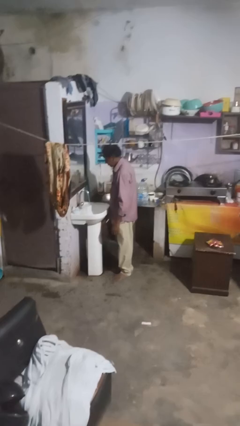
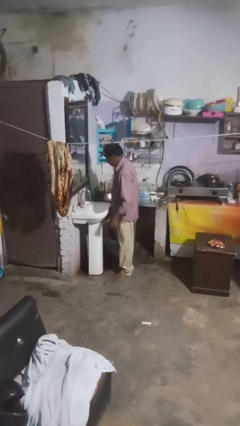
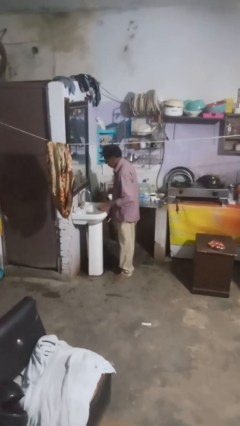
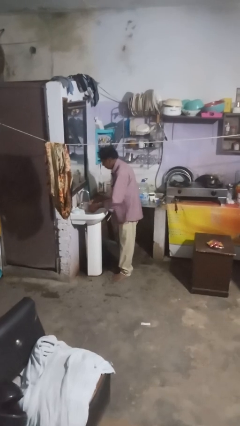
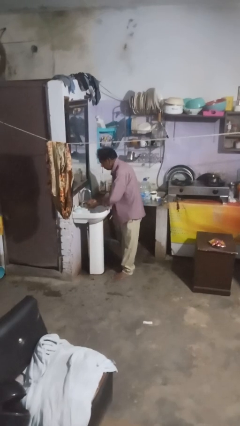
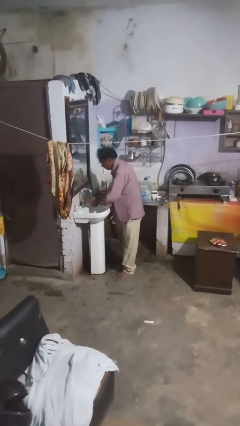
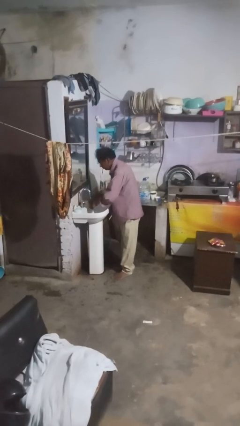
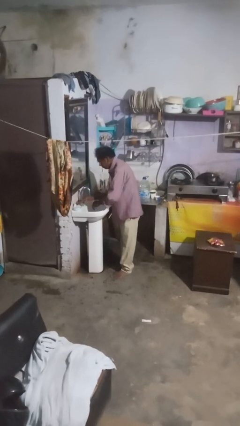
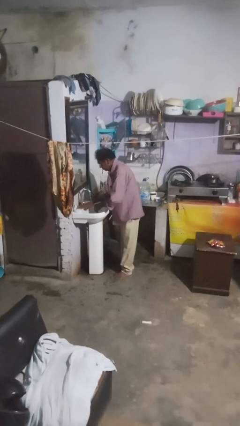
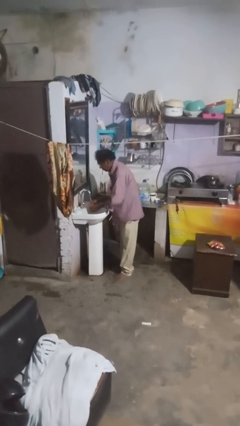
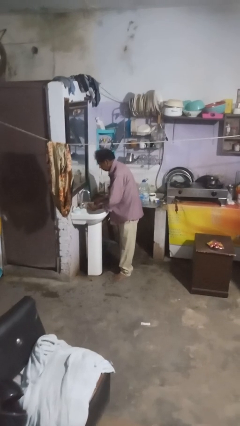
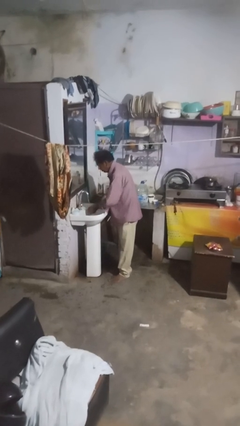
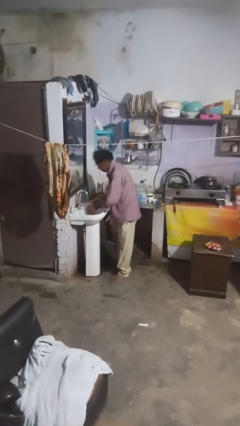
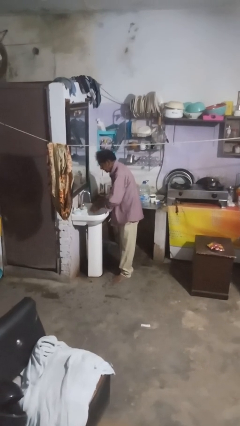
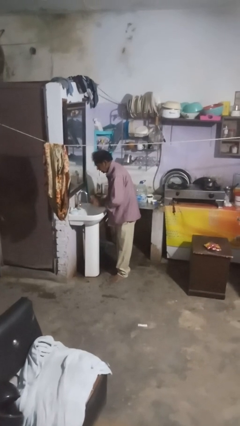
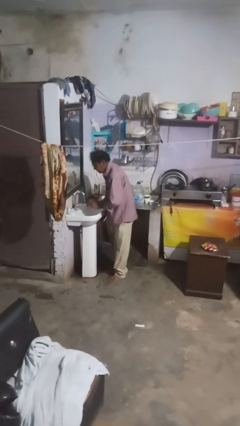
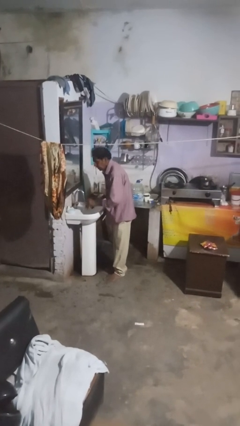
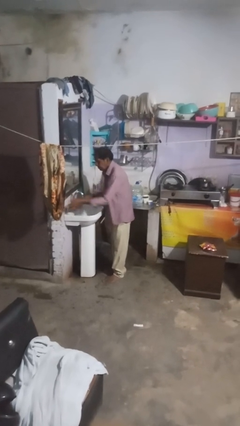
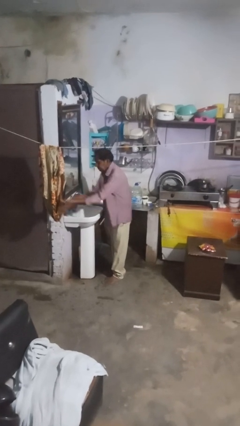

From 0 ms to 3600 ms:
person washes hands

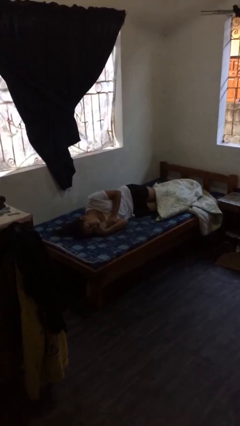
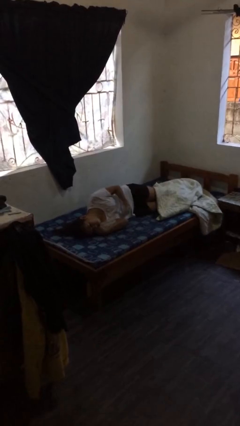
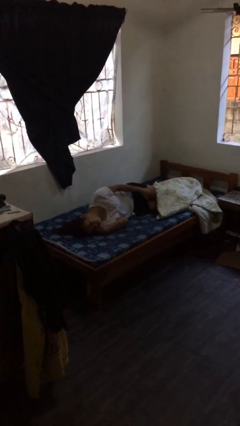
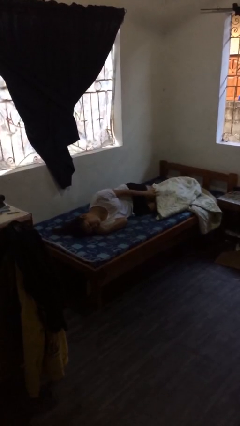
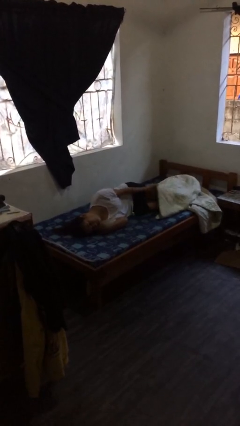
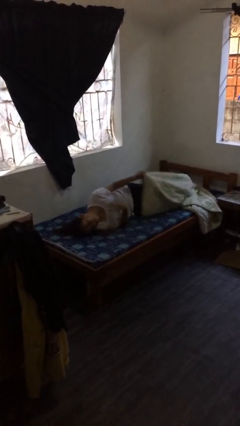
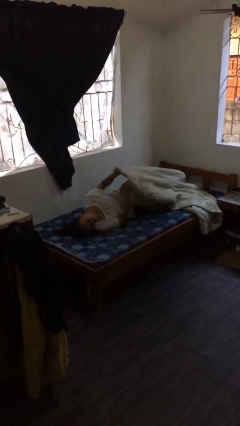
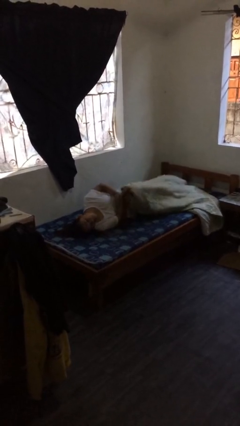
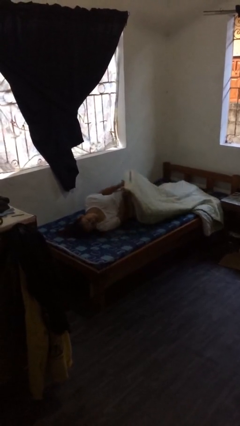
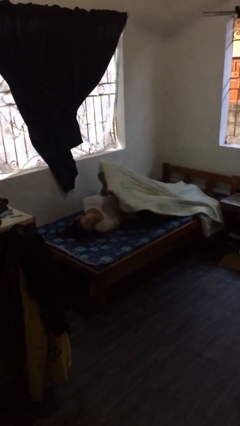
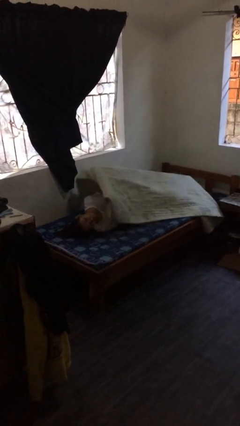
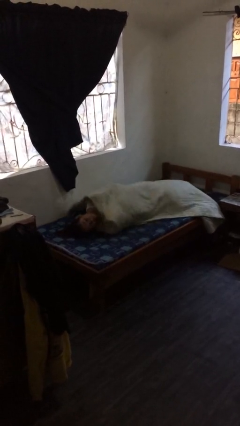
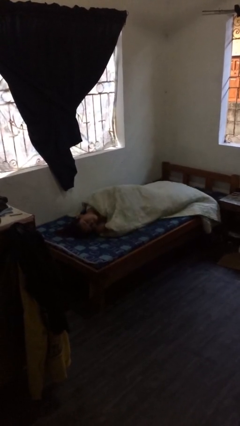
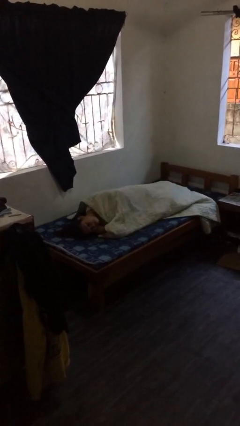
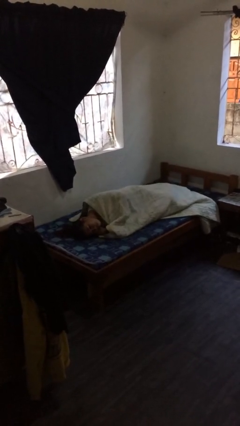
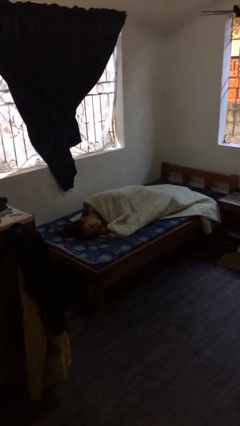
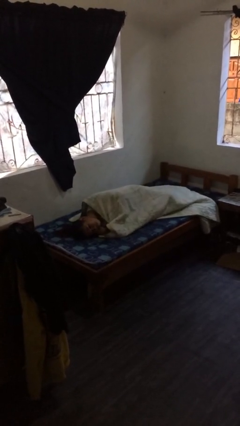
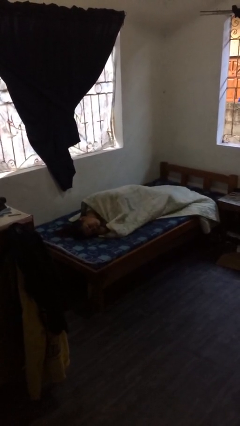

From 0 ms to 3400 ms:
person covers with bedsheets

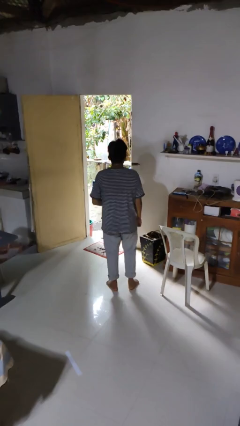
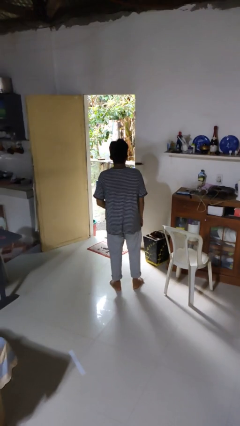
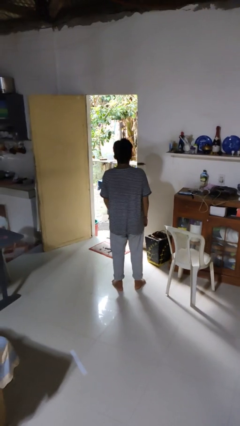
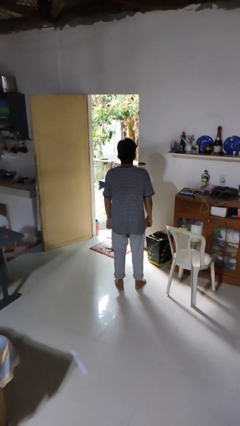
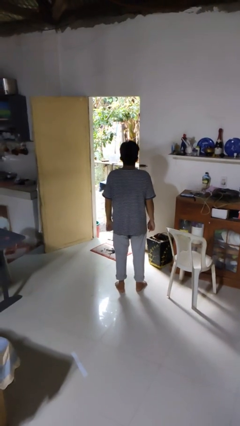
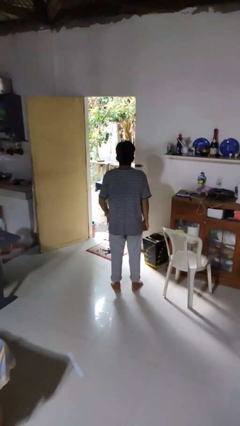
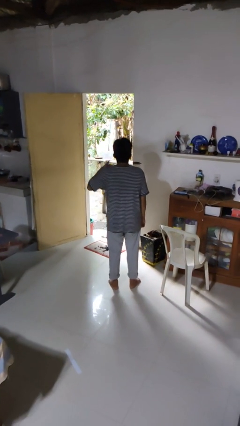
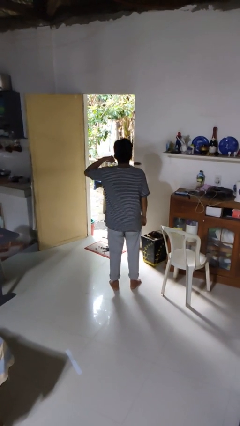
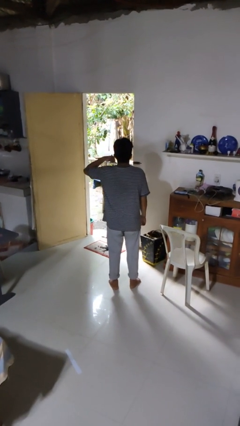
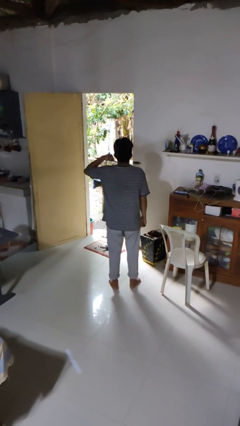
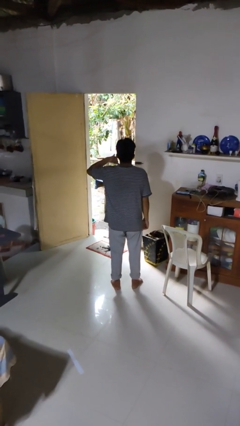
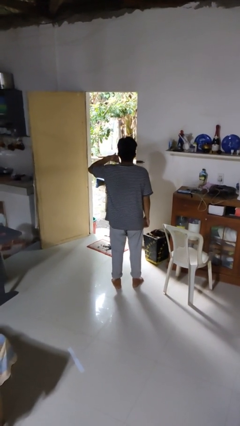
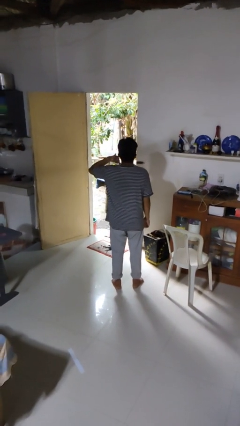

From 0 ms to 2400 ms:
person gestures call me

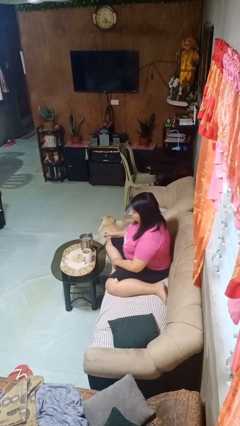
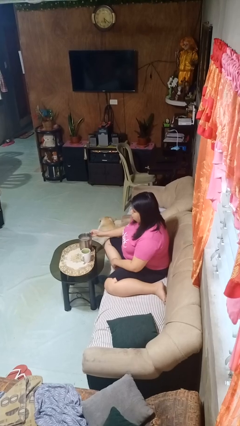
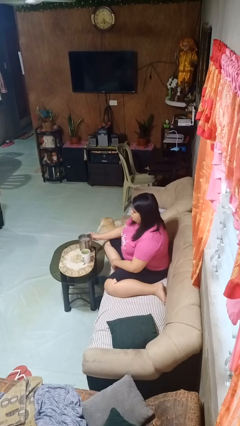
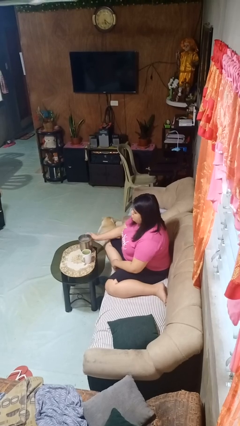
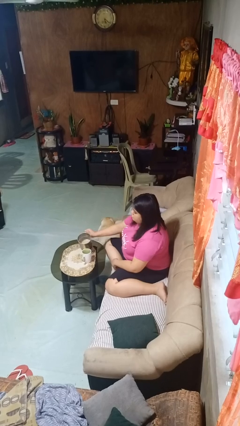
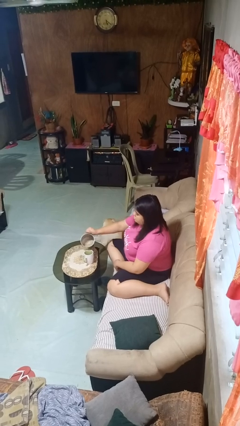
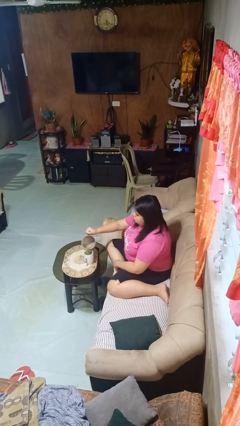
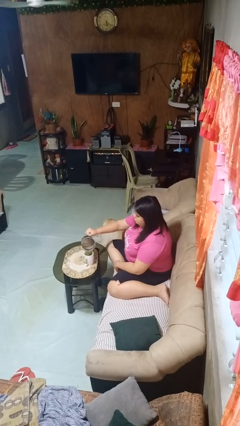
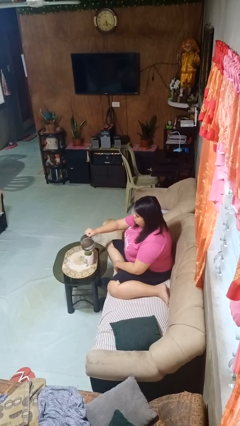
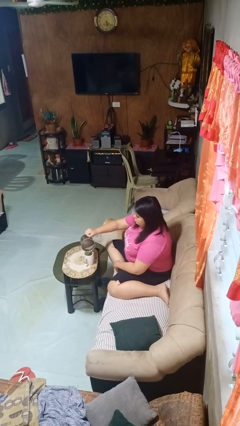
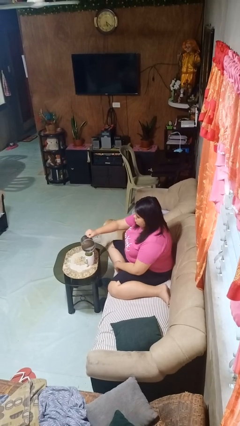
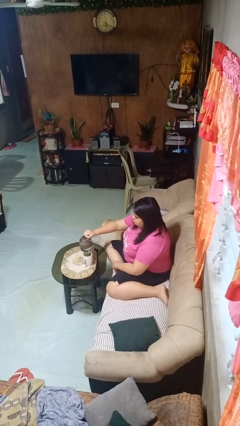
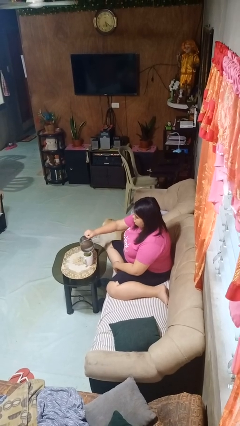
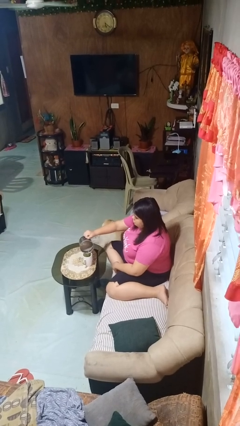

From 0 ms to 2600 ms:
person pours coffee into mug

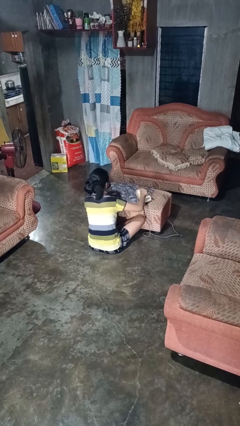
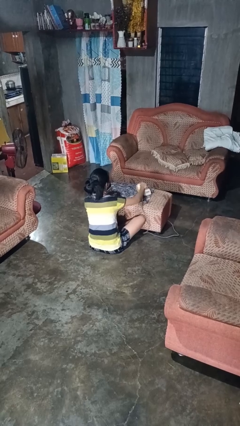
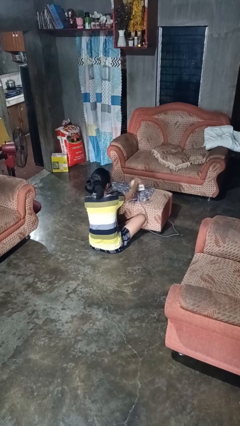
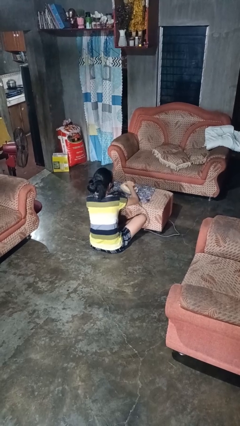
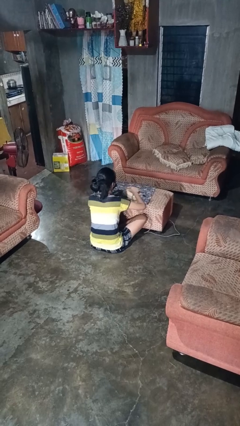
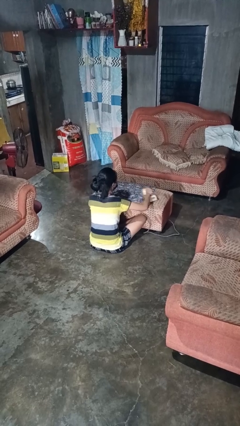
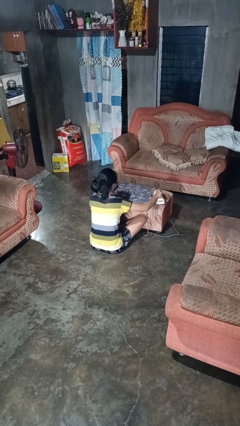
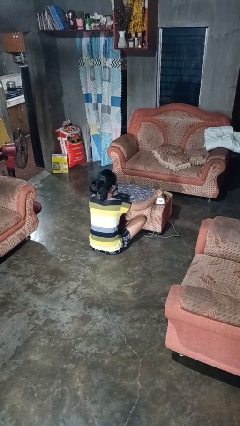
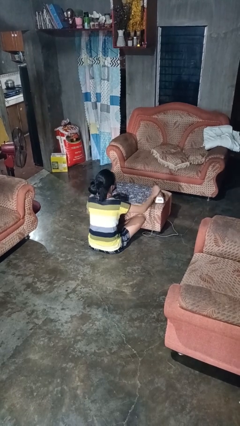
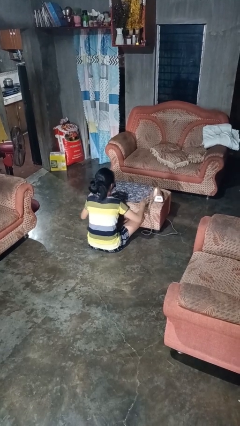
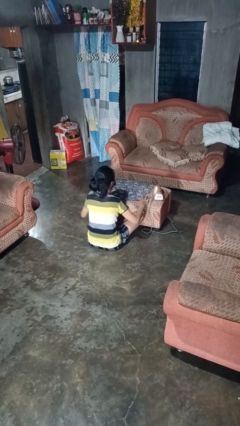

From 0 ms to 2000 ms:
person irons clothes

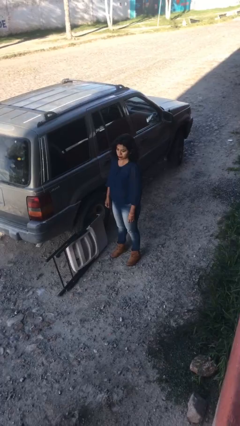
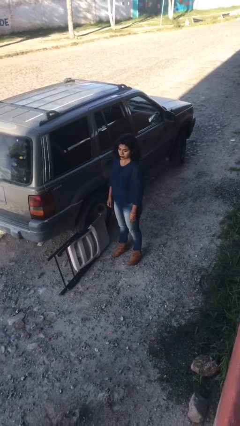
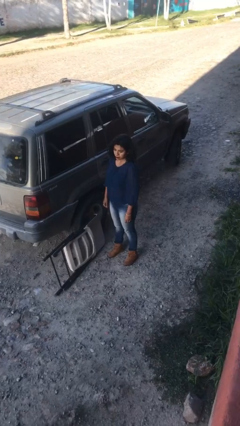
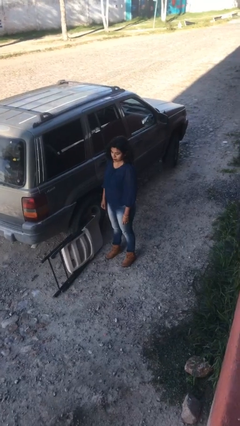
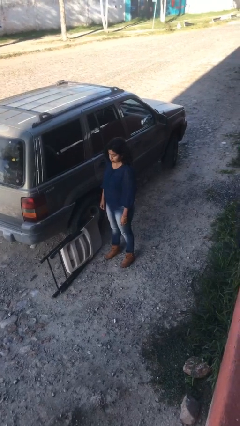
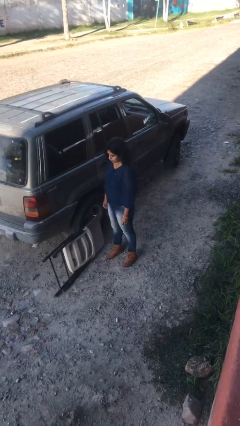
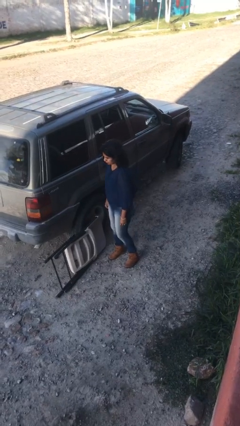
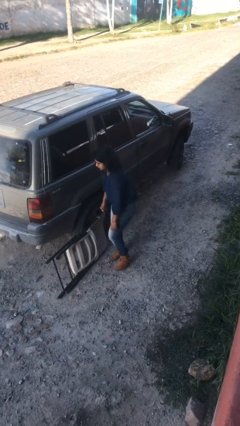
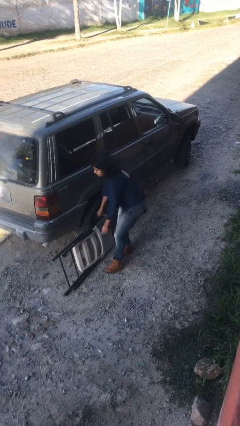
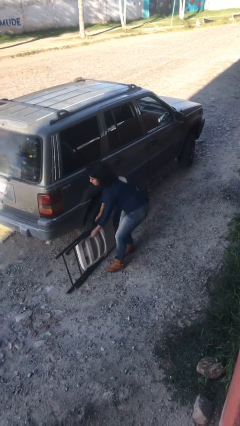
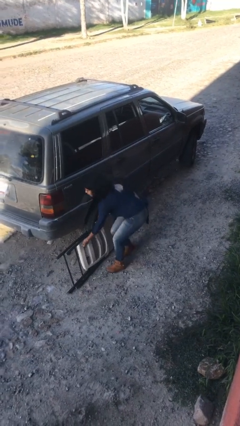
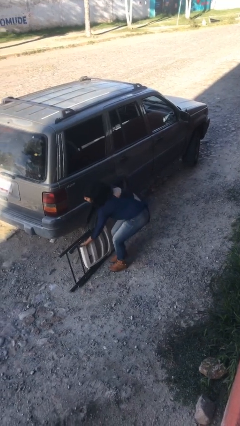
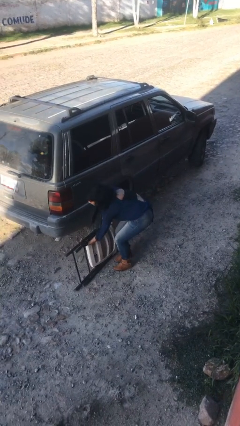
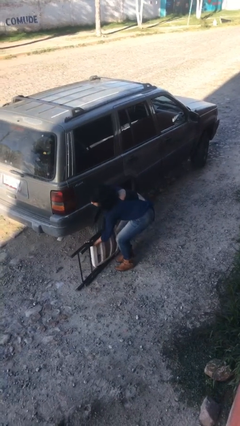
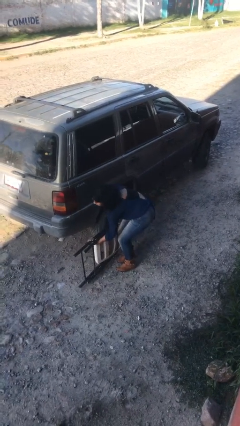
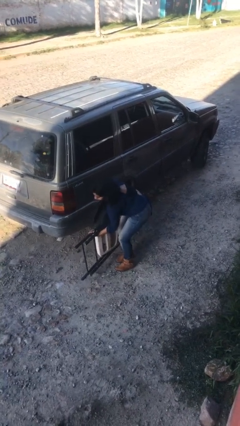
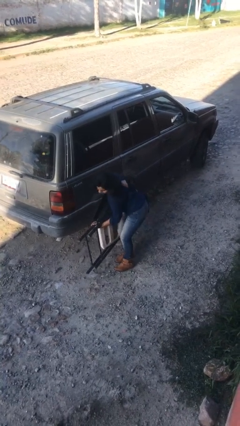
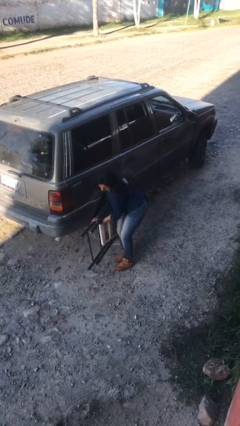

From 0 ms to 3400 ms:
person picks up object from floor
